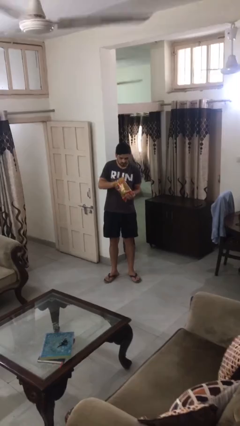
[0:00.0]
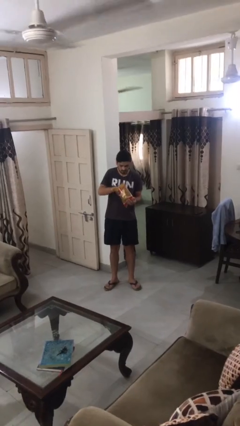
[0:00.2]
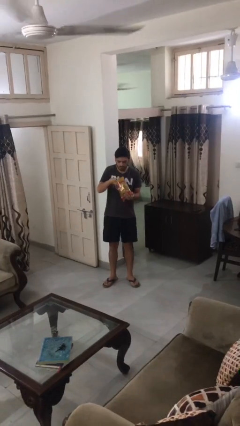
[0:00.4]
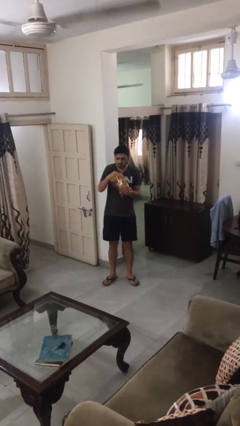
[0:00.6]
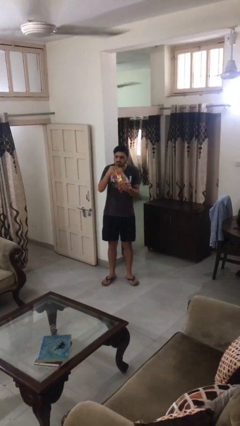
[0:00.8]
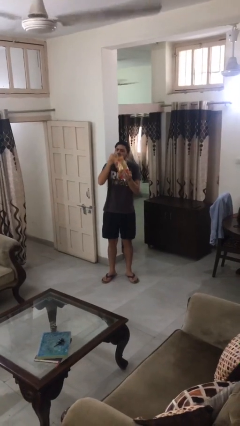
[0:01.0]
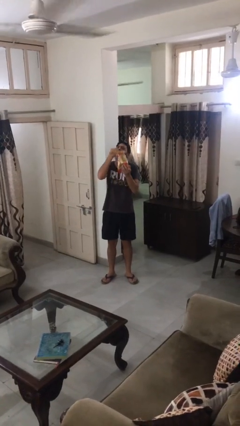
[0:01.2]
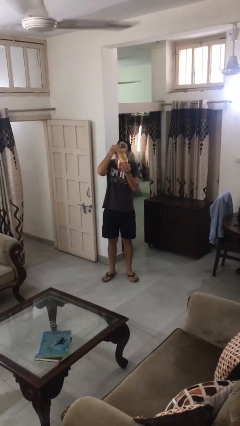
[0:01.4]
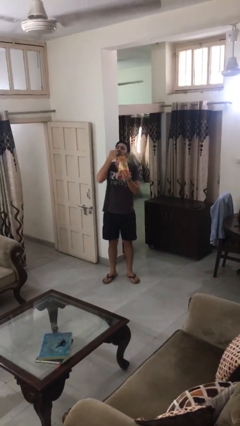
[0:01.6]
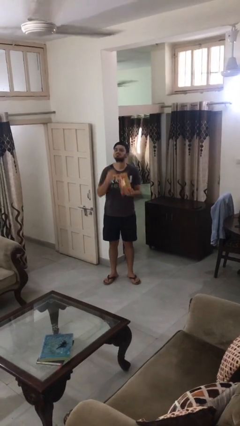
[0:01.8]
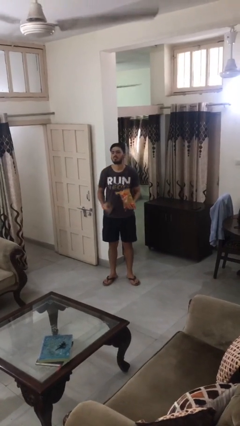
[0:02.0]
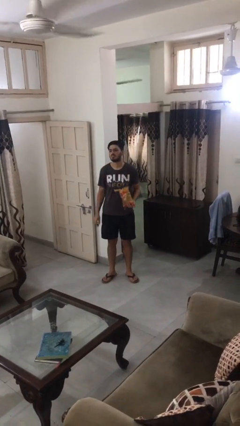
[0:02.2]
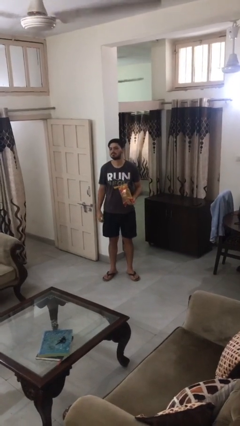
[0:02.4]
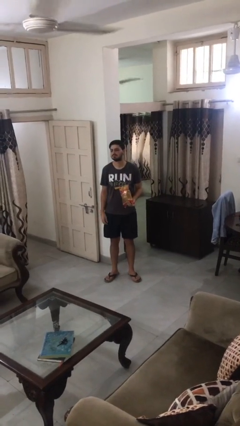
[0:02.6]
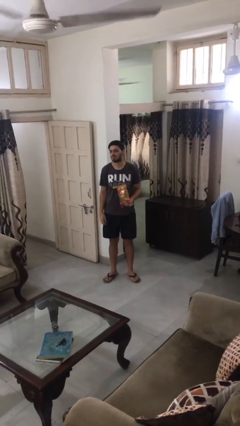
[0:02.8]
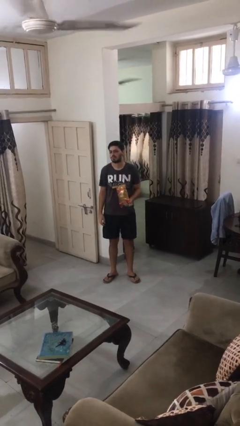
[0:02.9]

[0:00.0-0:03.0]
person eats snack from bag

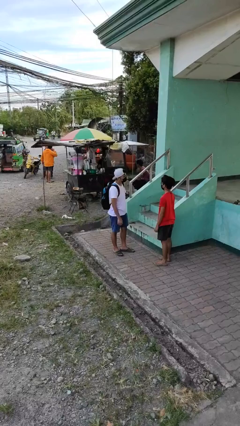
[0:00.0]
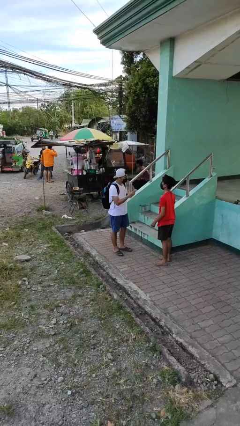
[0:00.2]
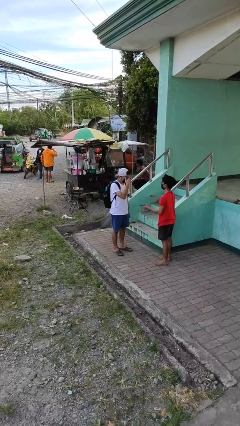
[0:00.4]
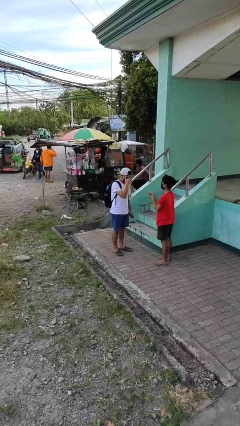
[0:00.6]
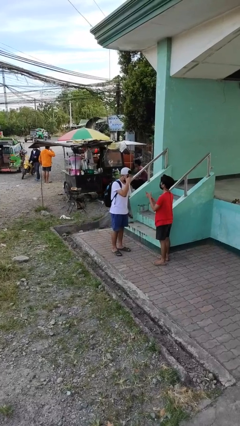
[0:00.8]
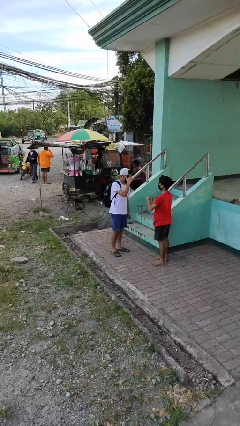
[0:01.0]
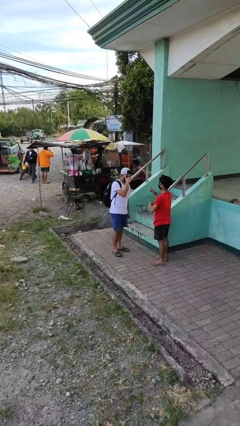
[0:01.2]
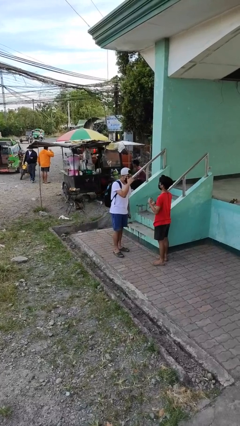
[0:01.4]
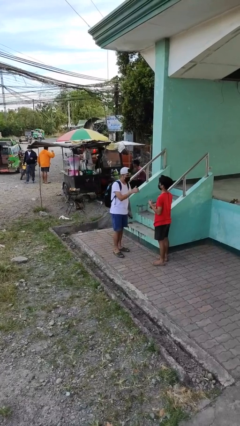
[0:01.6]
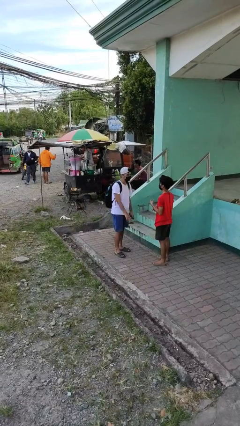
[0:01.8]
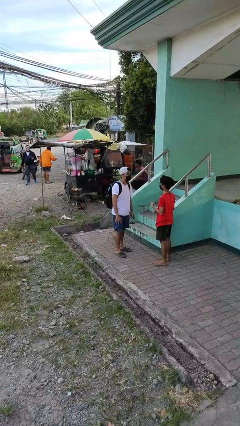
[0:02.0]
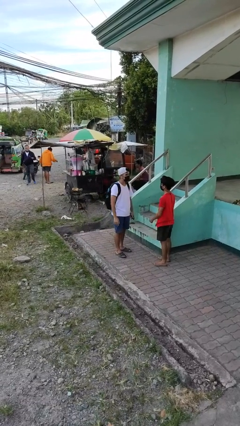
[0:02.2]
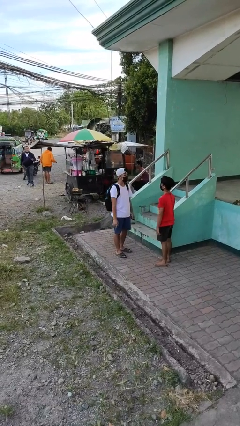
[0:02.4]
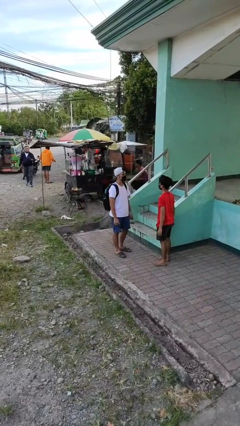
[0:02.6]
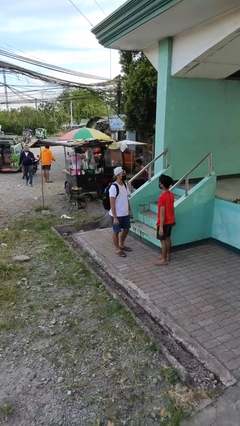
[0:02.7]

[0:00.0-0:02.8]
person talks to person

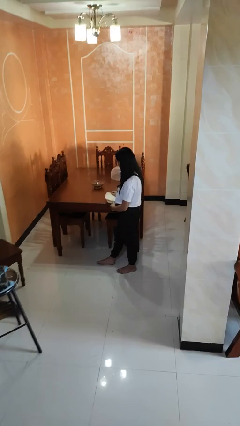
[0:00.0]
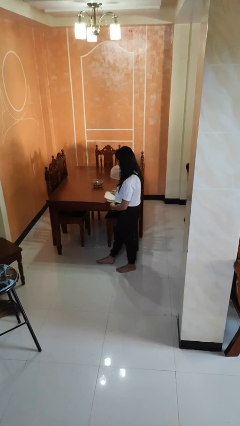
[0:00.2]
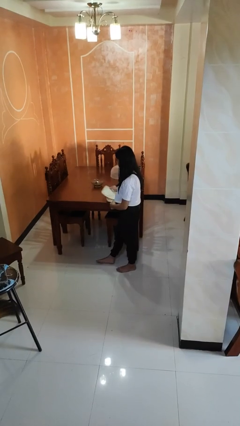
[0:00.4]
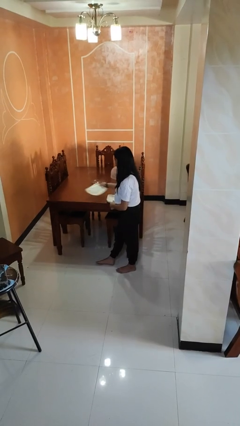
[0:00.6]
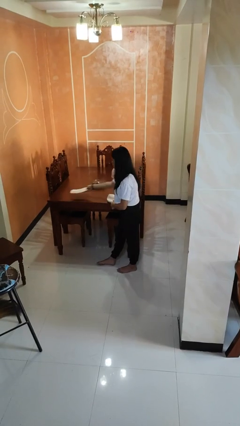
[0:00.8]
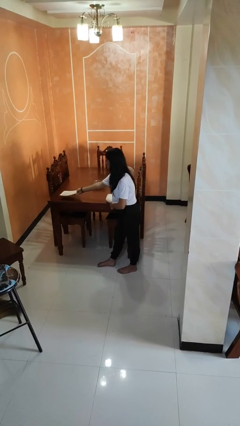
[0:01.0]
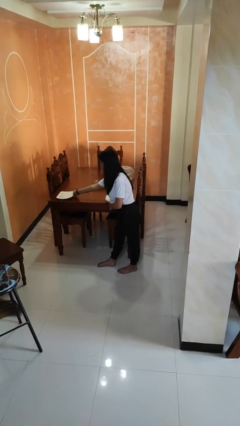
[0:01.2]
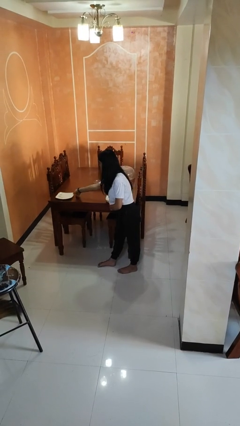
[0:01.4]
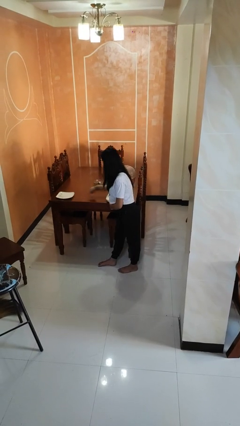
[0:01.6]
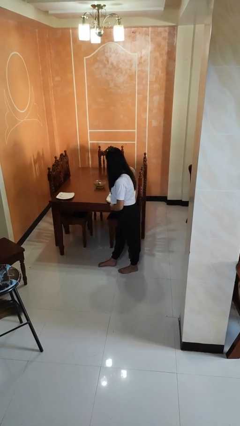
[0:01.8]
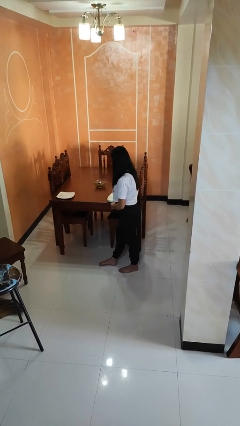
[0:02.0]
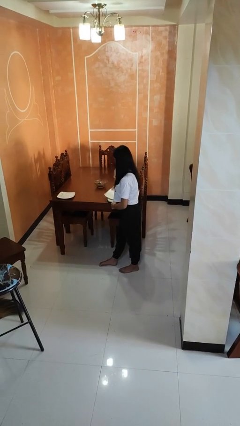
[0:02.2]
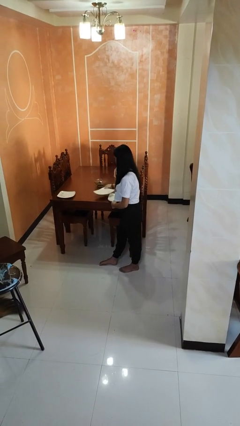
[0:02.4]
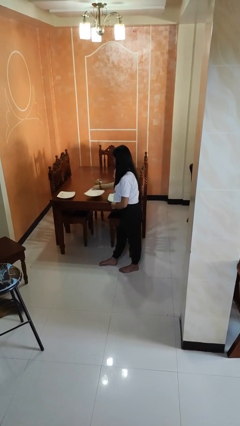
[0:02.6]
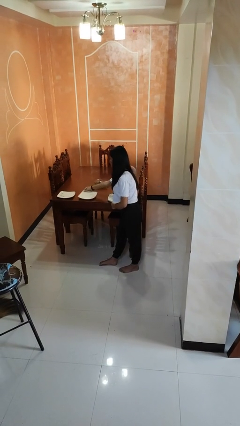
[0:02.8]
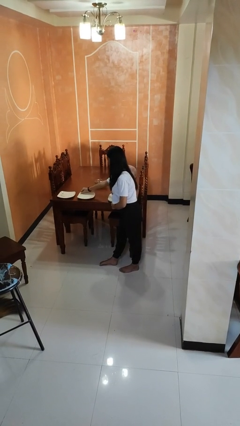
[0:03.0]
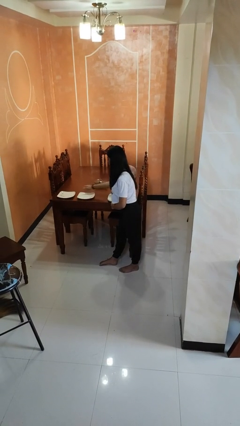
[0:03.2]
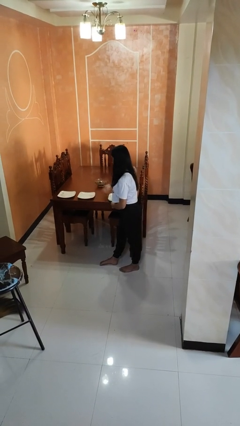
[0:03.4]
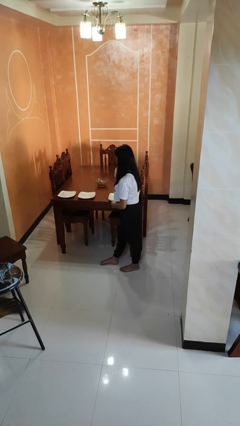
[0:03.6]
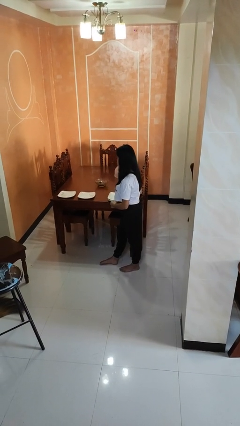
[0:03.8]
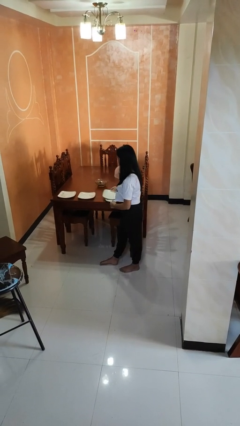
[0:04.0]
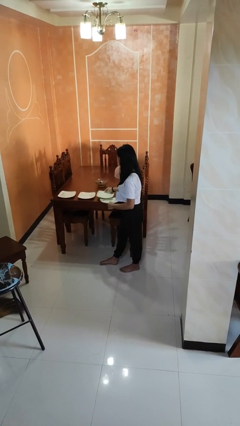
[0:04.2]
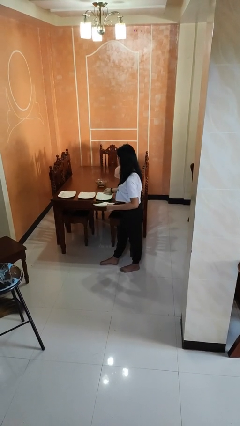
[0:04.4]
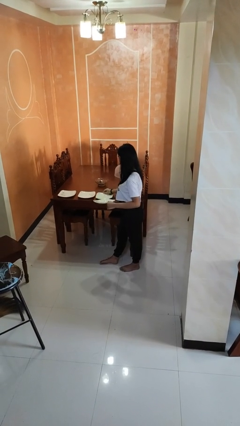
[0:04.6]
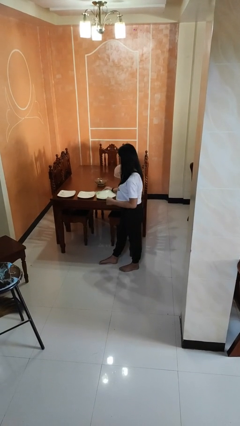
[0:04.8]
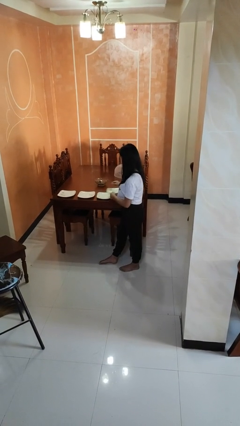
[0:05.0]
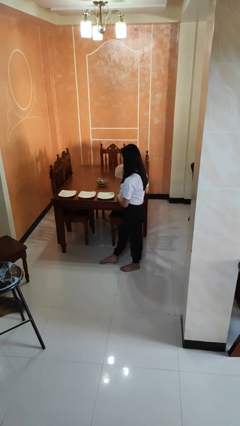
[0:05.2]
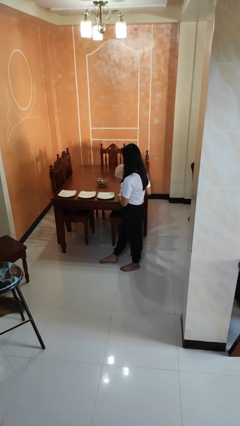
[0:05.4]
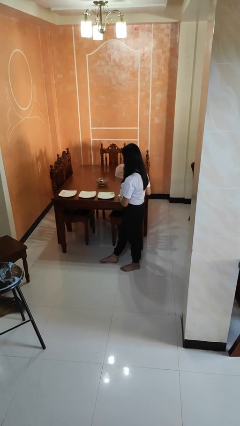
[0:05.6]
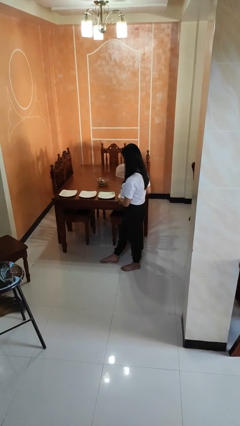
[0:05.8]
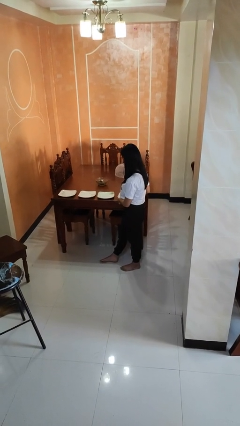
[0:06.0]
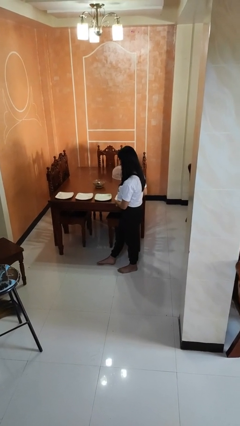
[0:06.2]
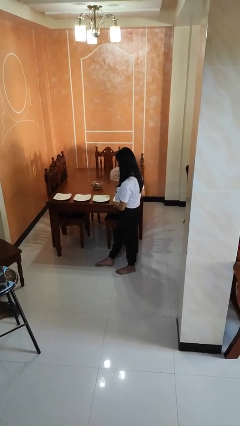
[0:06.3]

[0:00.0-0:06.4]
person sets table

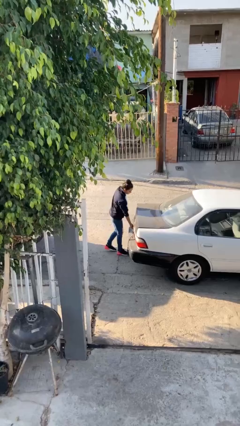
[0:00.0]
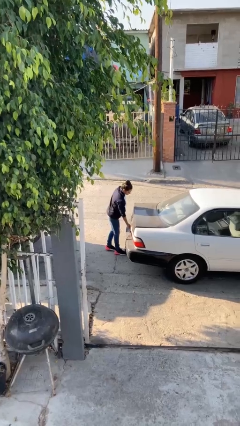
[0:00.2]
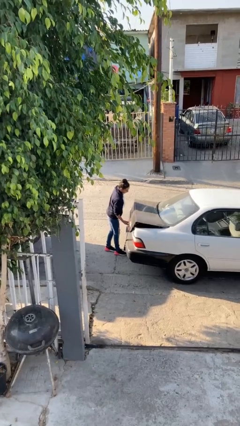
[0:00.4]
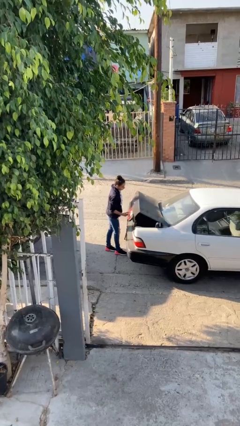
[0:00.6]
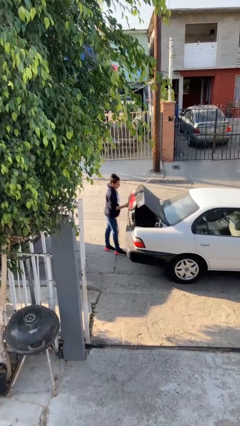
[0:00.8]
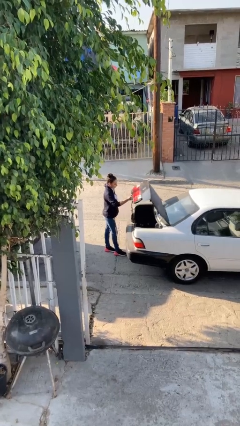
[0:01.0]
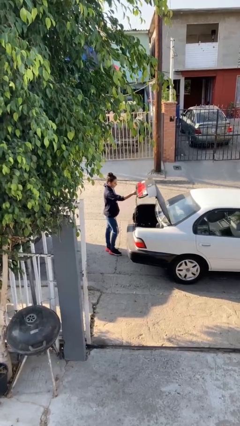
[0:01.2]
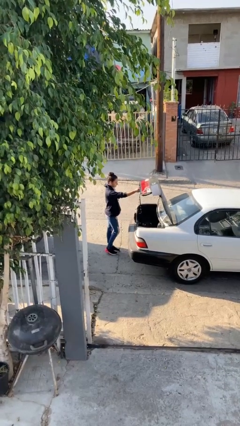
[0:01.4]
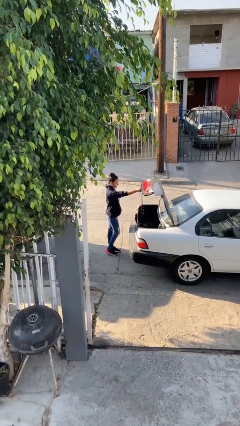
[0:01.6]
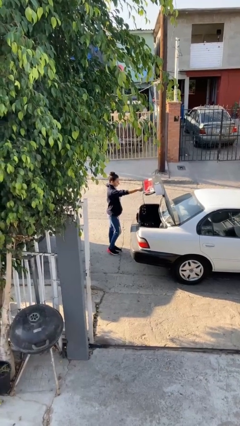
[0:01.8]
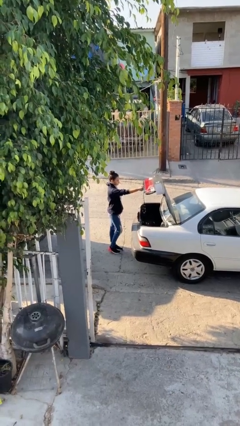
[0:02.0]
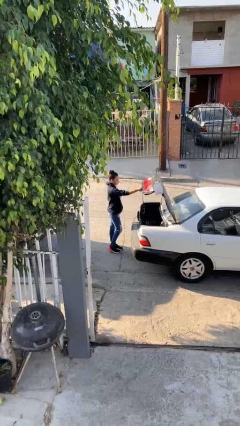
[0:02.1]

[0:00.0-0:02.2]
person opens car trunk

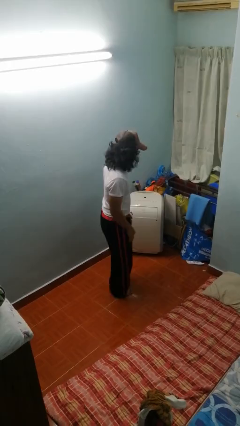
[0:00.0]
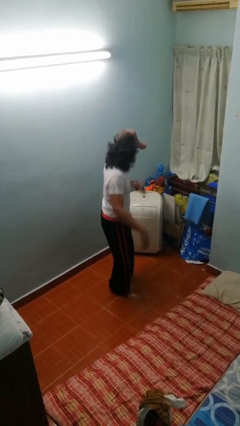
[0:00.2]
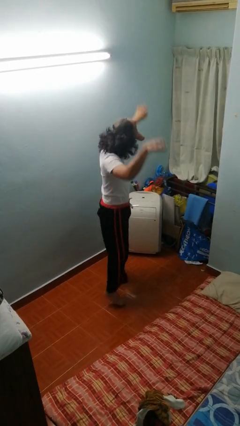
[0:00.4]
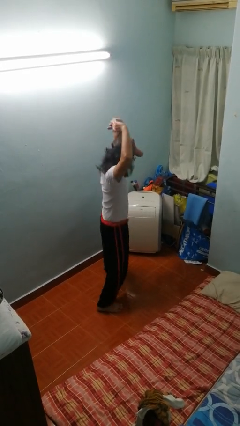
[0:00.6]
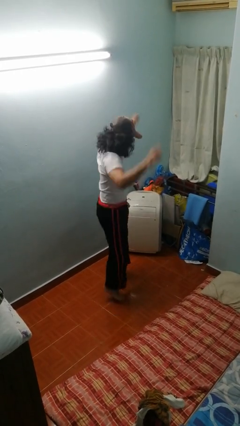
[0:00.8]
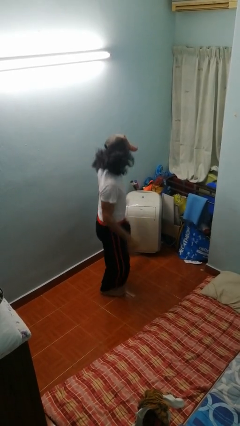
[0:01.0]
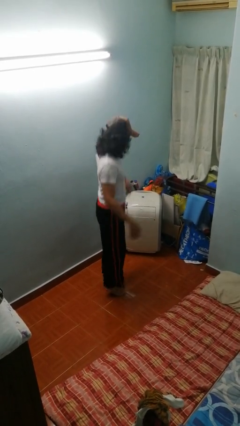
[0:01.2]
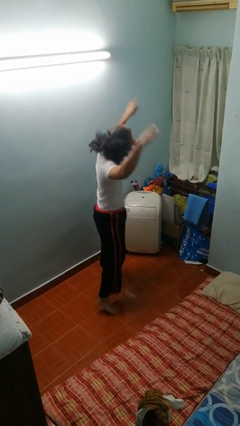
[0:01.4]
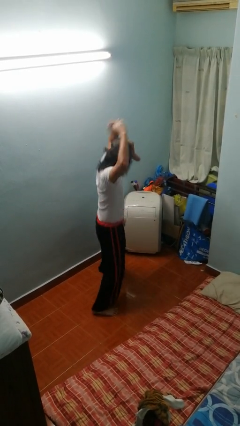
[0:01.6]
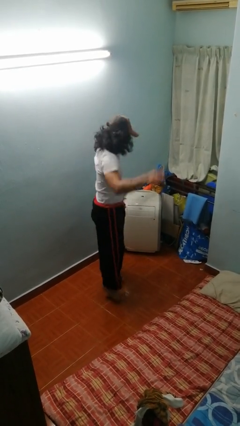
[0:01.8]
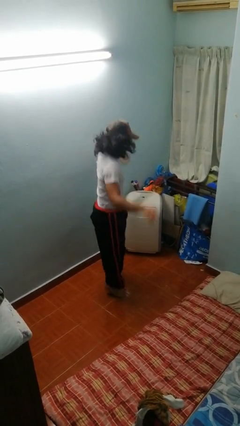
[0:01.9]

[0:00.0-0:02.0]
person exercises with jumping jacks

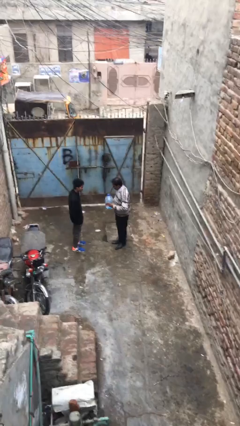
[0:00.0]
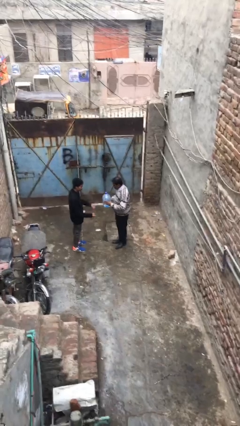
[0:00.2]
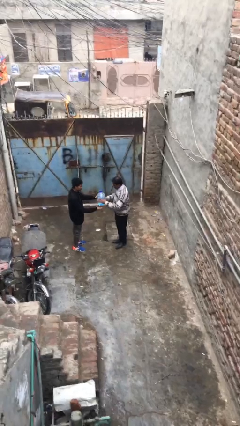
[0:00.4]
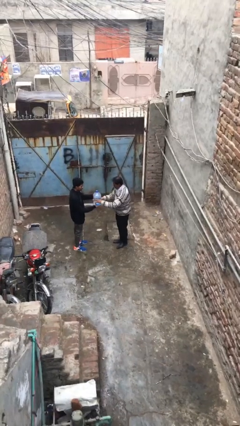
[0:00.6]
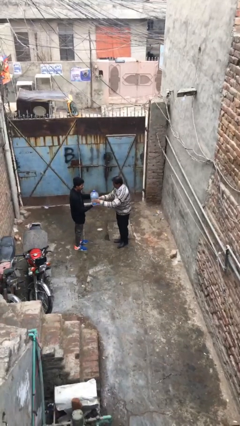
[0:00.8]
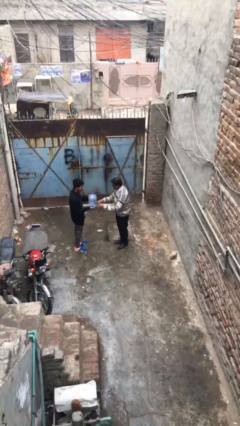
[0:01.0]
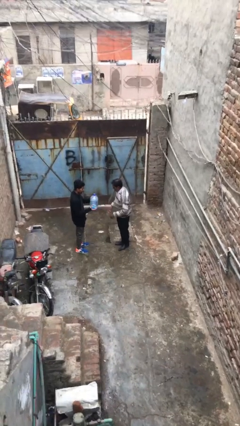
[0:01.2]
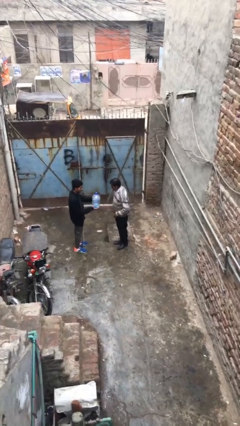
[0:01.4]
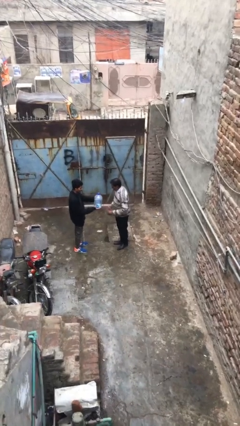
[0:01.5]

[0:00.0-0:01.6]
person transfers object to person
